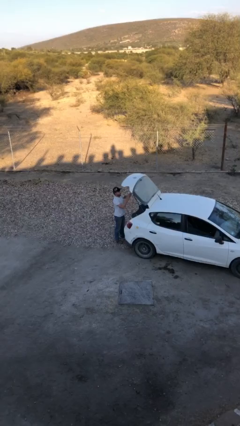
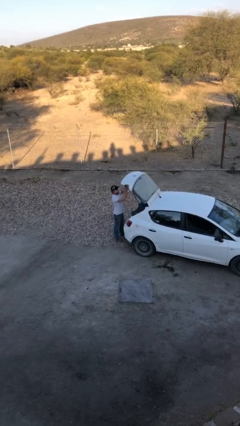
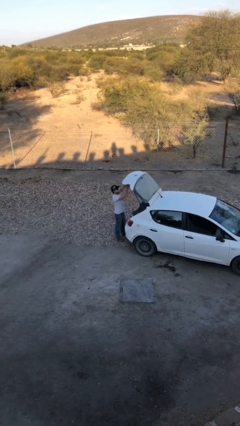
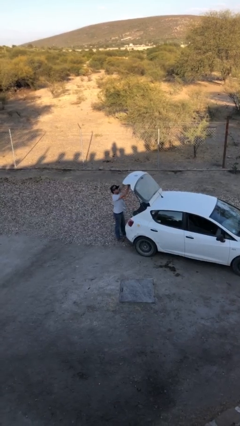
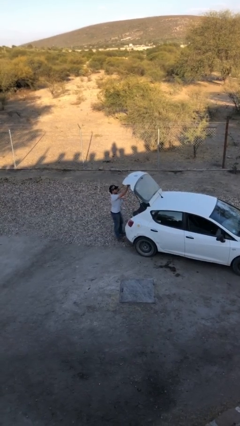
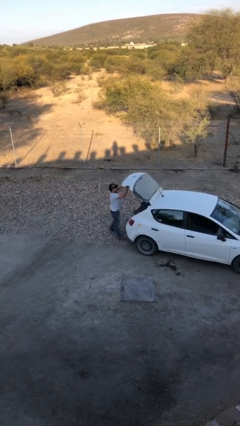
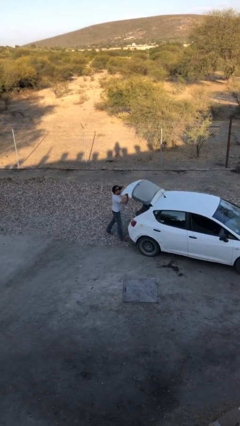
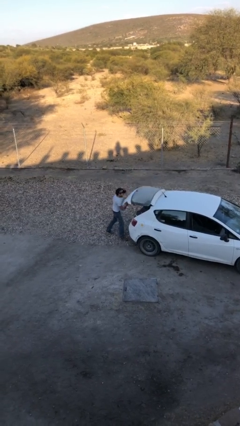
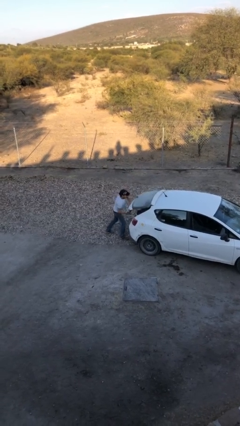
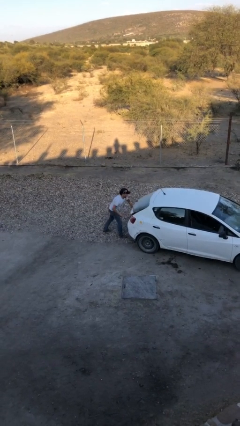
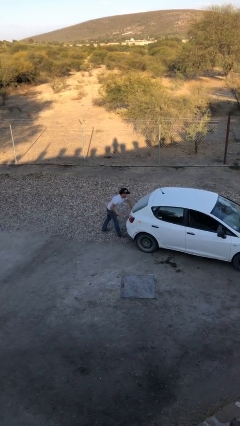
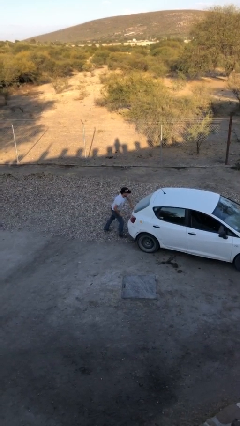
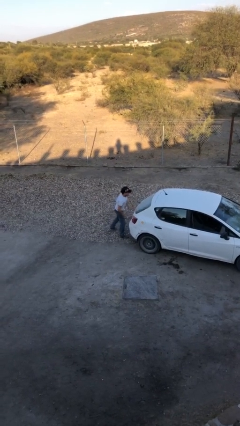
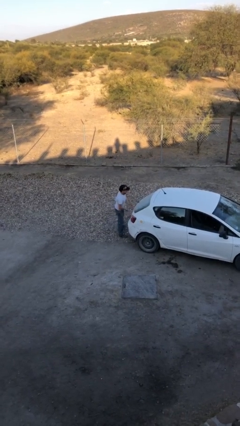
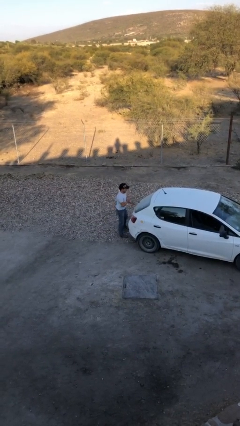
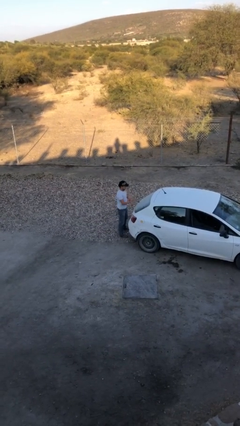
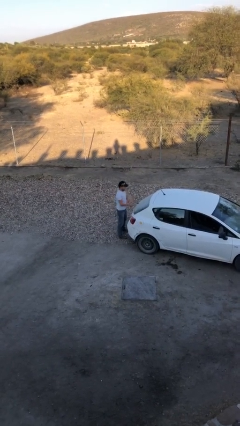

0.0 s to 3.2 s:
person closes car trunk

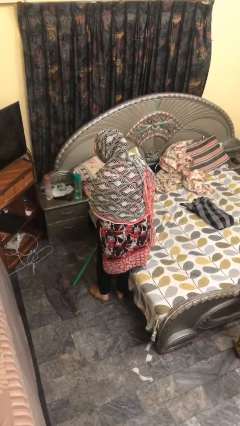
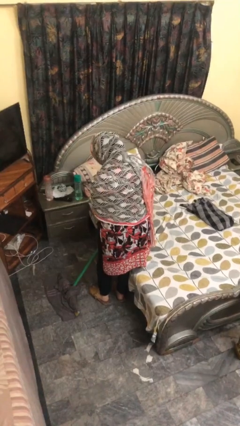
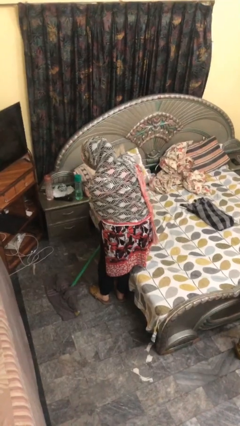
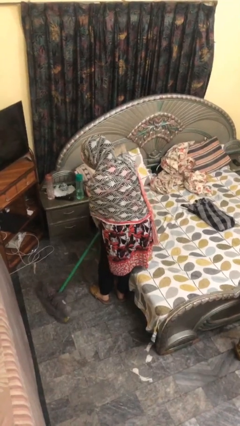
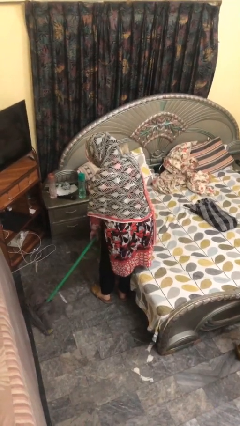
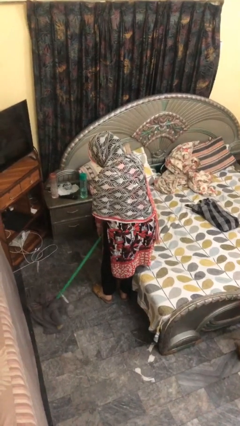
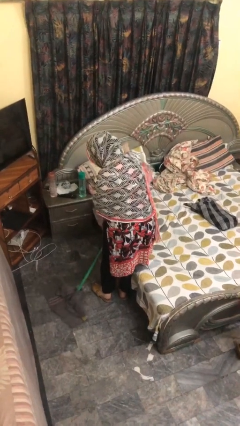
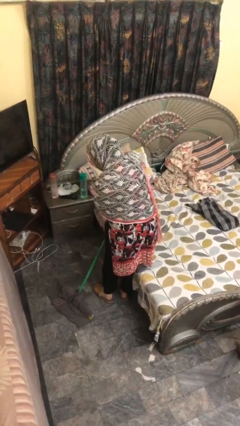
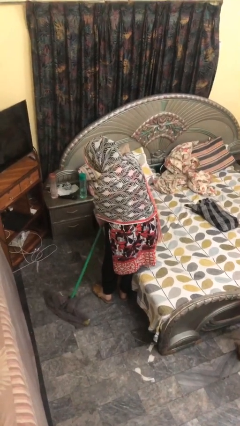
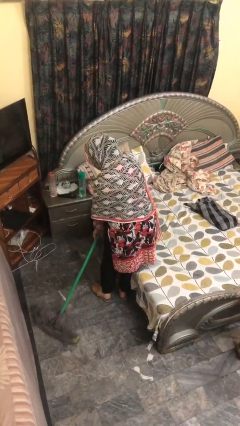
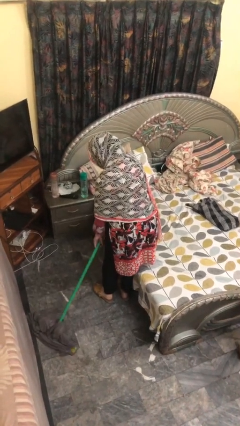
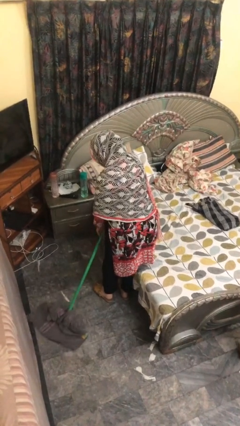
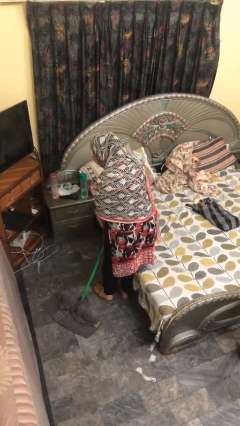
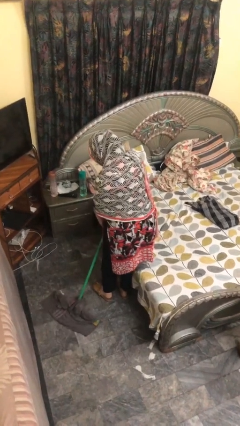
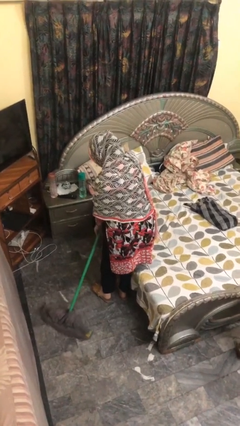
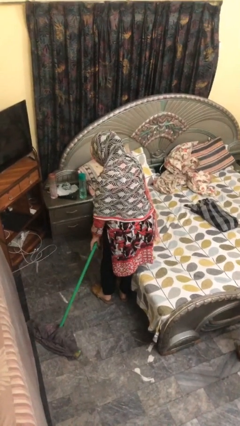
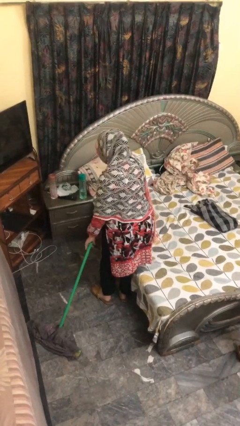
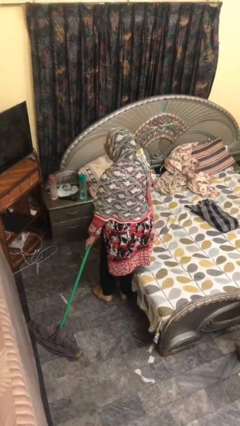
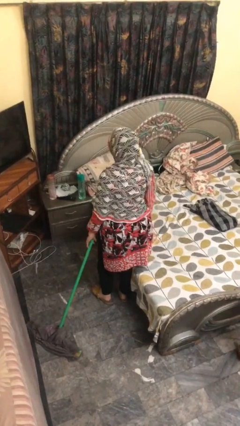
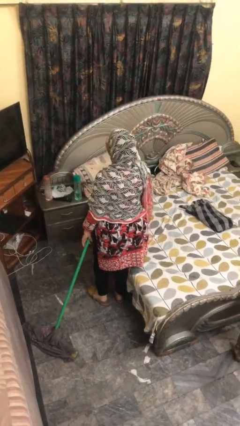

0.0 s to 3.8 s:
person mops

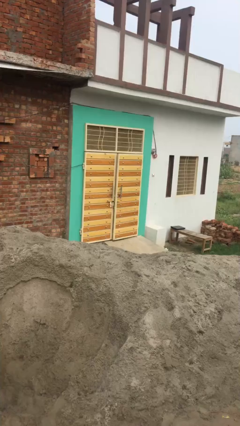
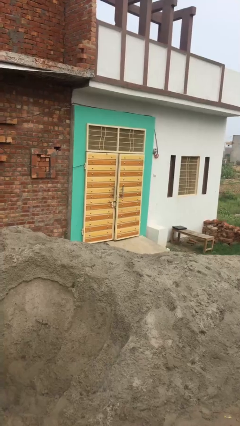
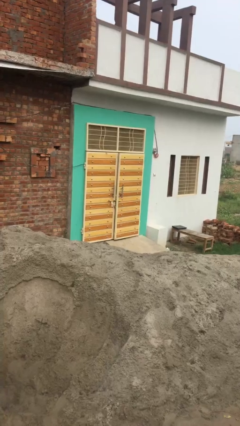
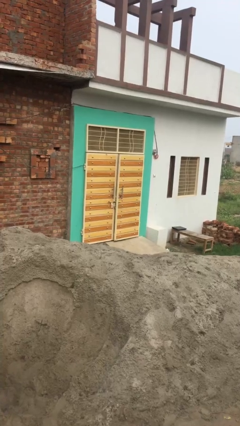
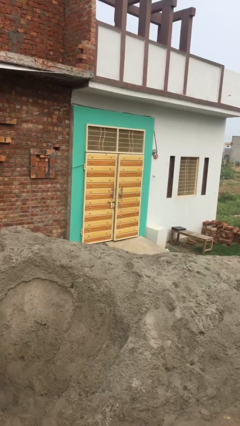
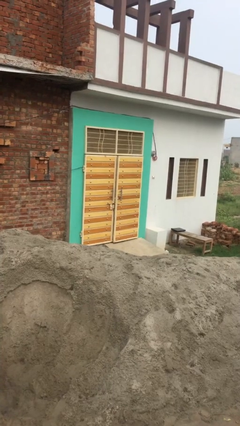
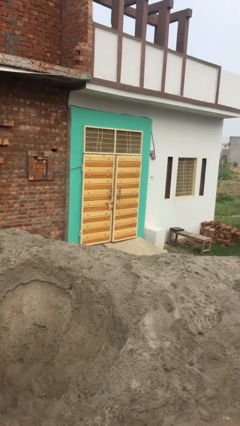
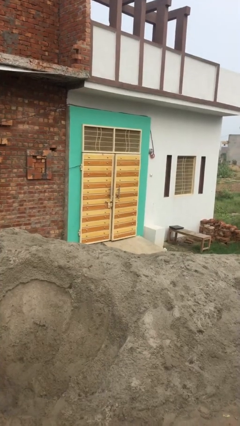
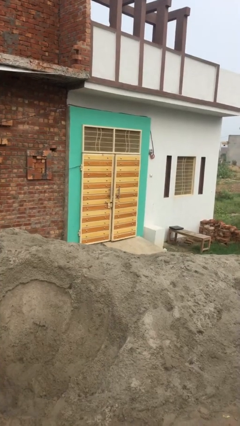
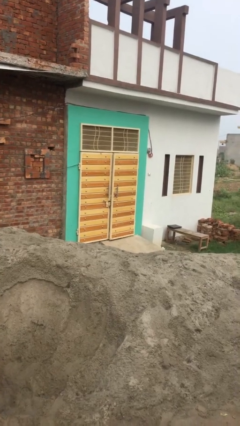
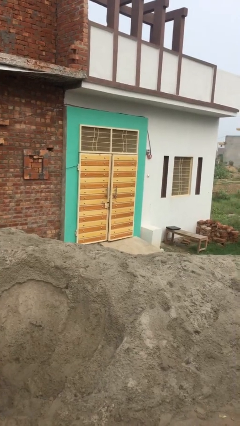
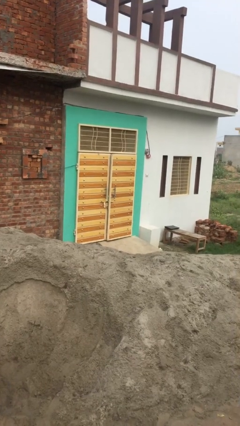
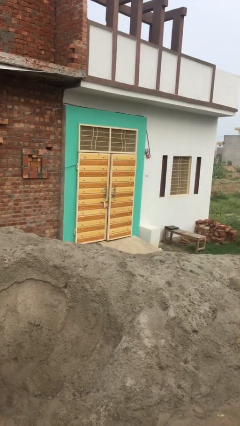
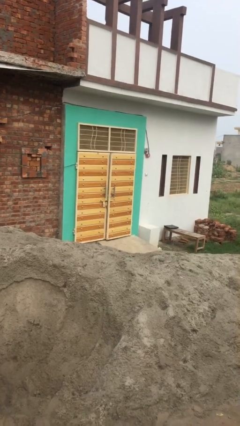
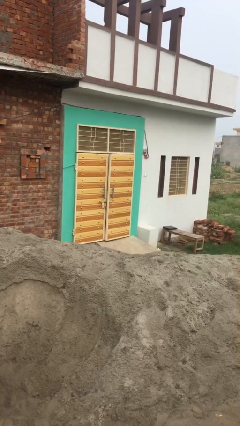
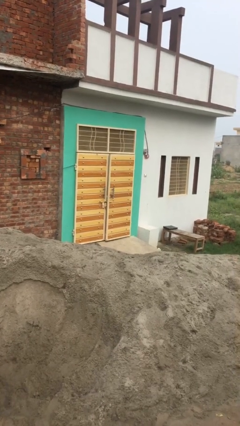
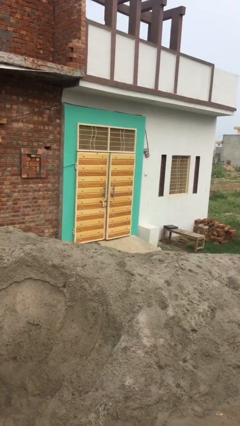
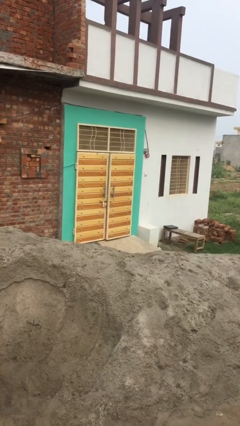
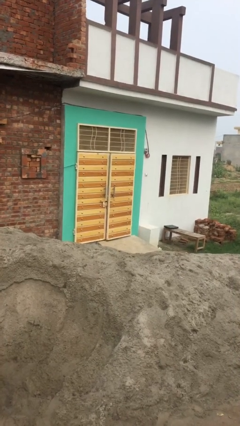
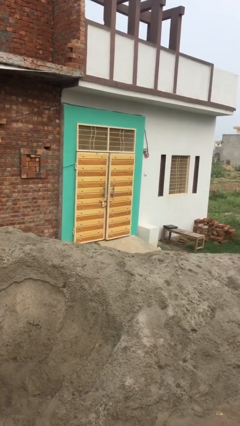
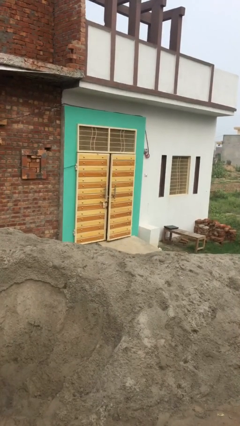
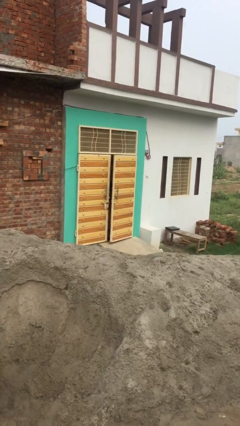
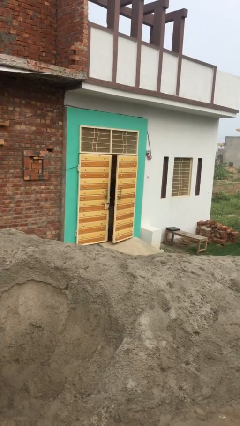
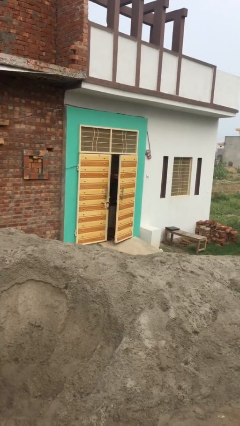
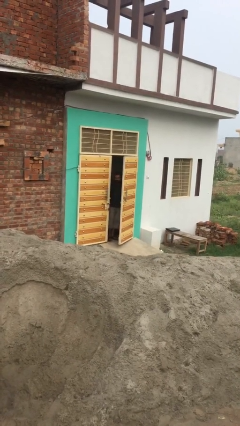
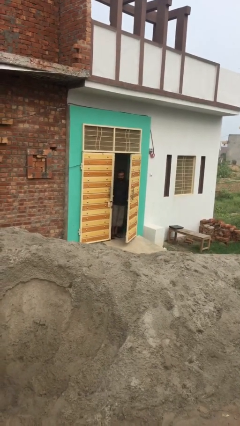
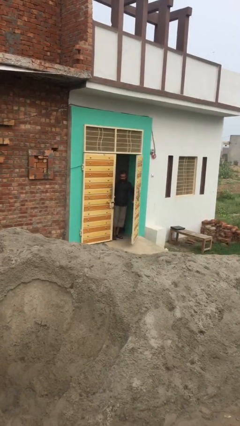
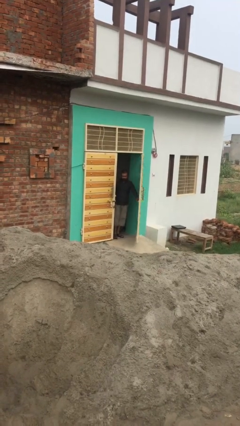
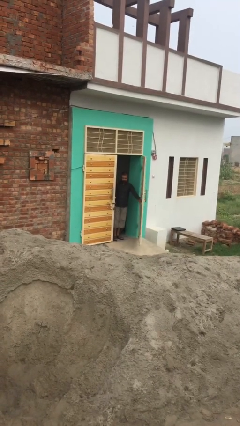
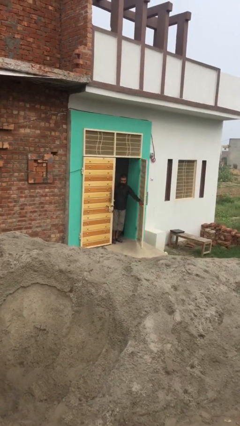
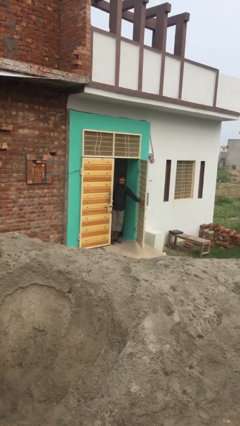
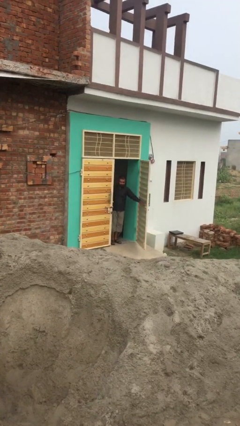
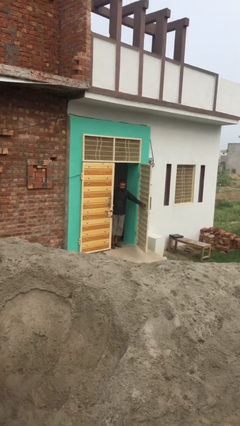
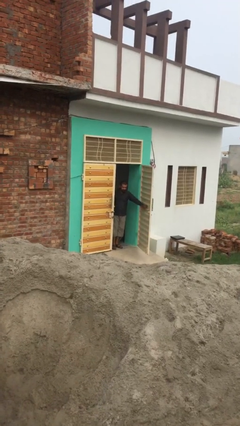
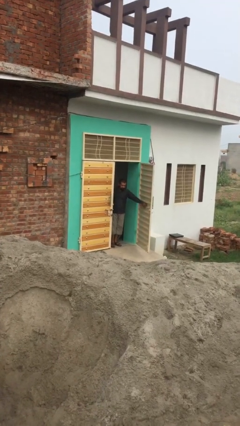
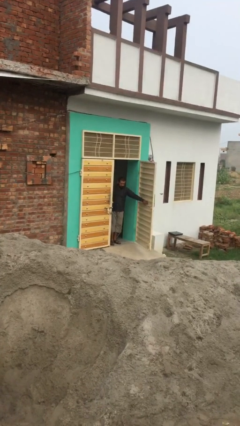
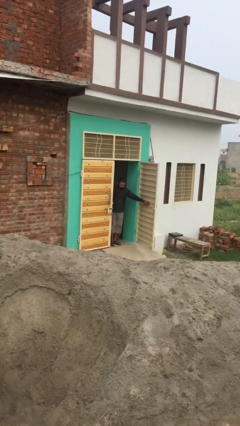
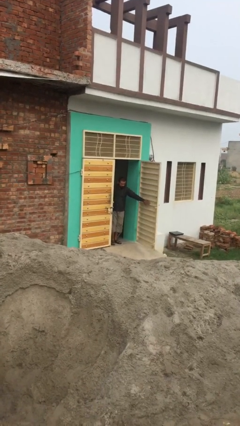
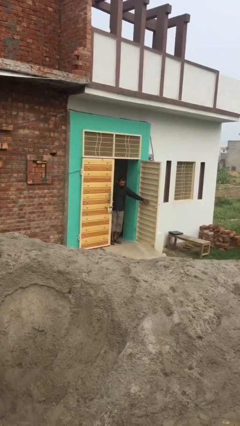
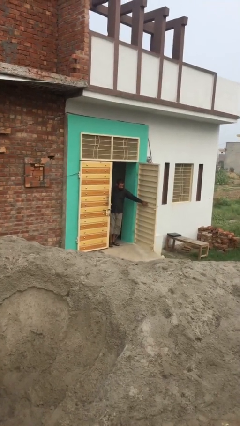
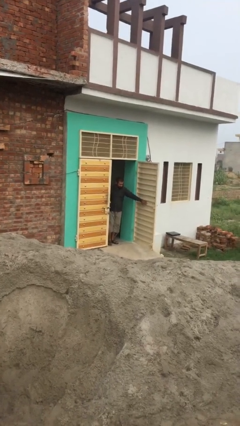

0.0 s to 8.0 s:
person enters scene through structure

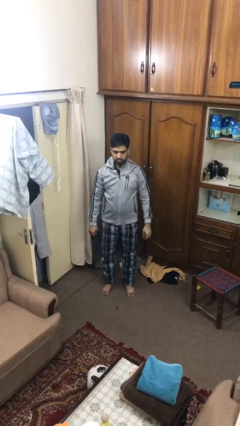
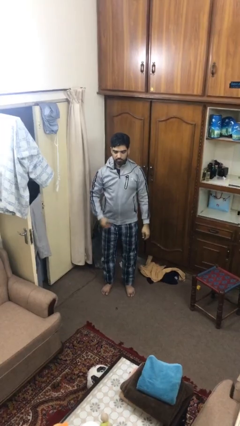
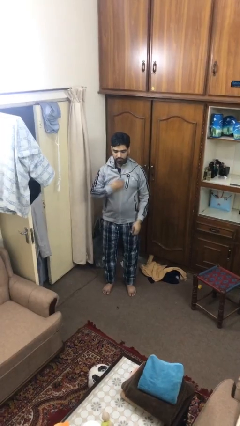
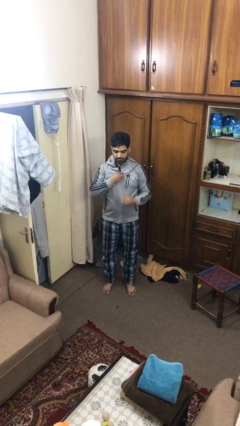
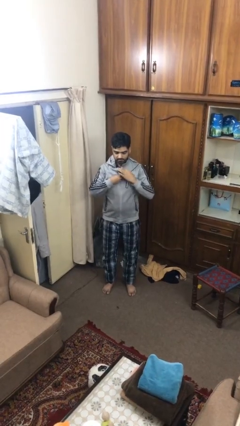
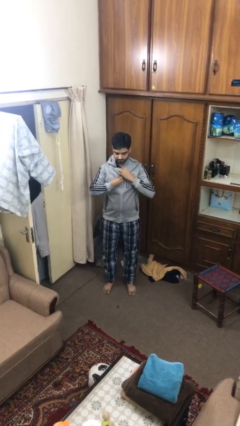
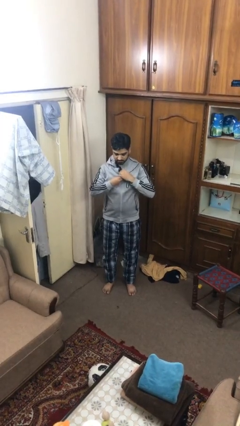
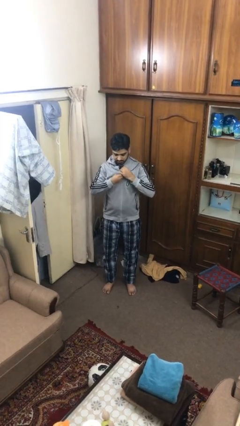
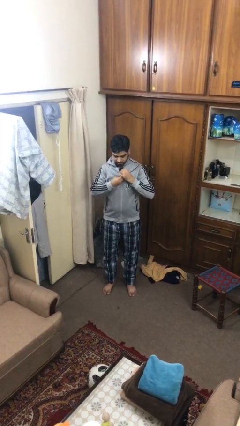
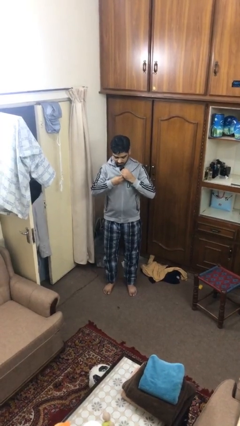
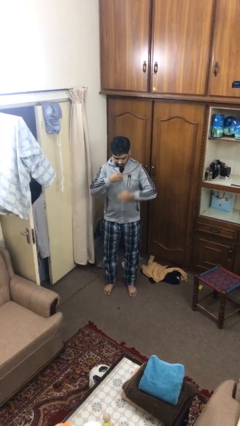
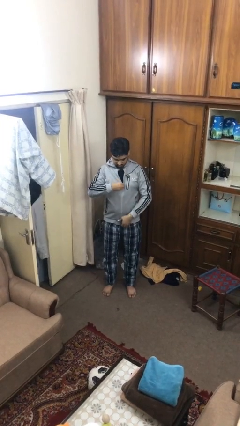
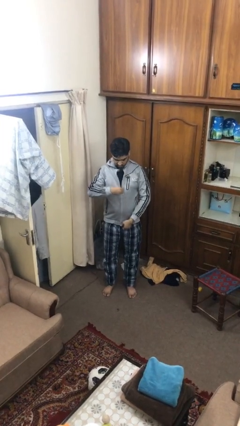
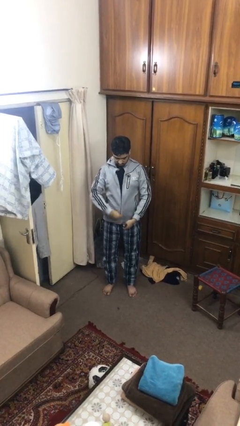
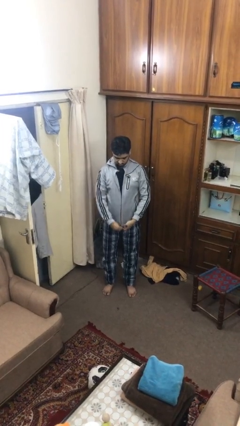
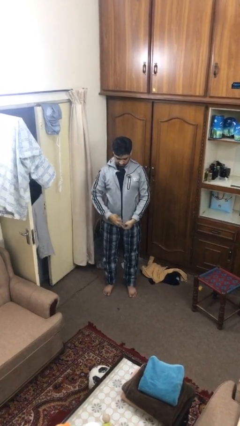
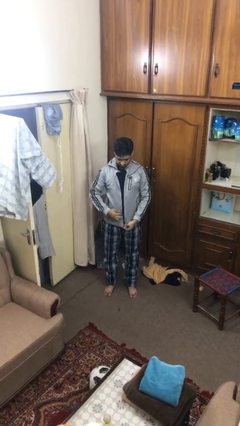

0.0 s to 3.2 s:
person unzips jacket
